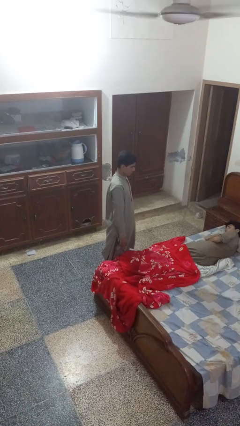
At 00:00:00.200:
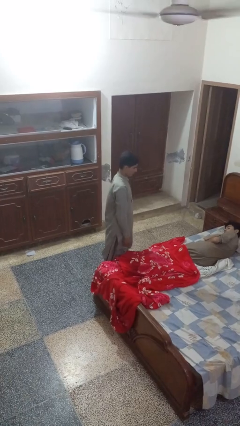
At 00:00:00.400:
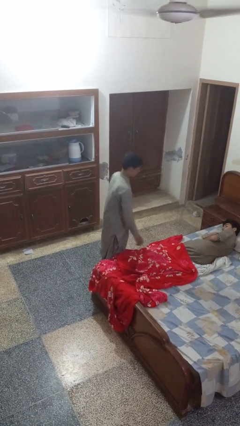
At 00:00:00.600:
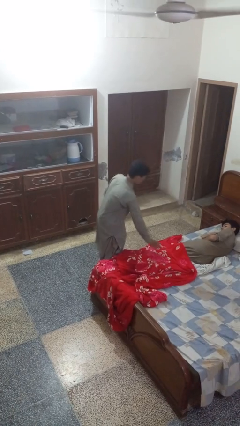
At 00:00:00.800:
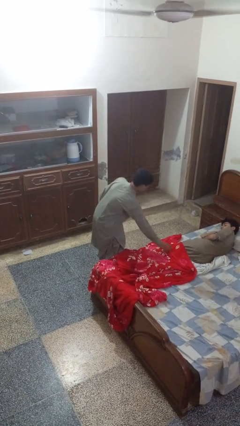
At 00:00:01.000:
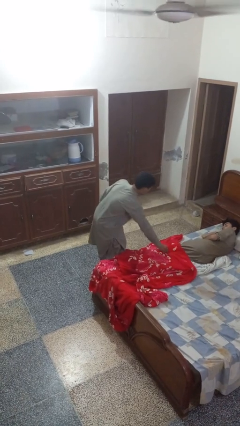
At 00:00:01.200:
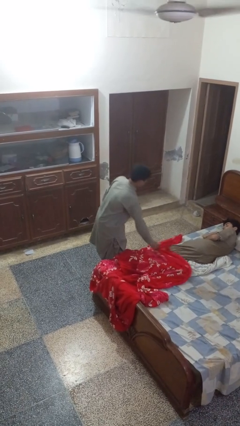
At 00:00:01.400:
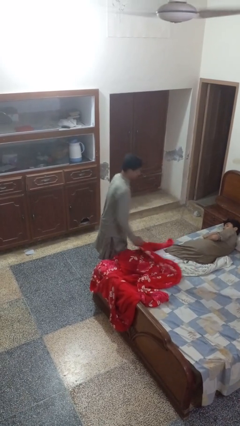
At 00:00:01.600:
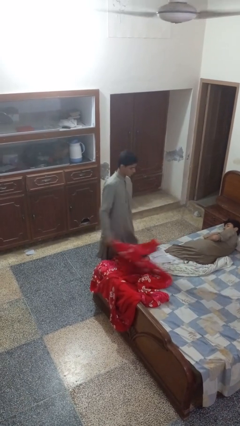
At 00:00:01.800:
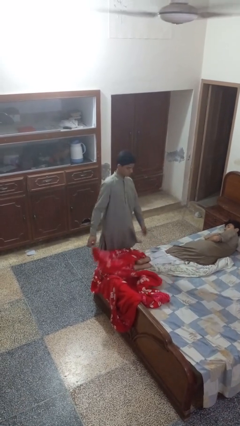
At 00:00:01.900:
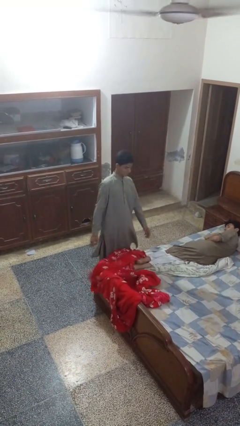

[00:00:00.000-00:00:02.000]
person uncovers friend with blanket

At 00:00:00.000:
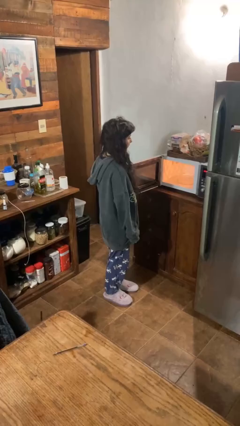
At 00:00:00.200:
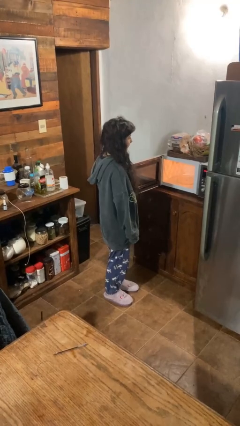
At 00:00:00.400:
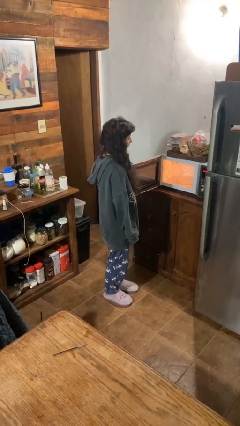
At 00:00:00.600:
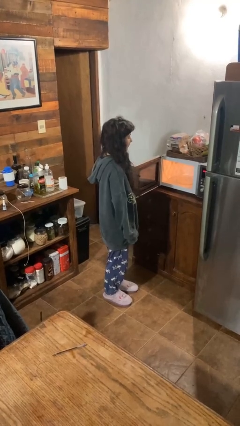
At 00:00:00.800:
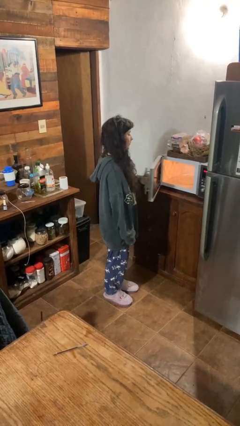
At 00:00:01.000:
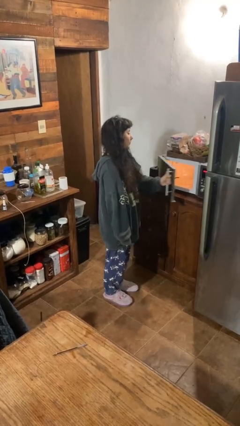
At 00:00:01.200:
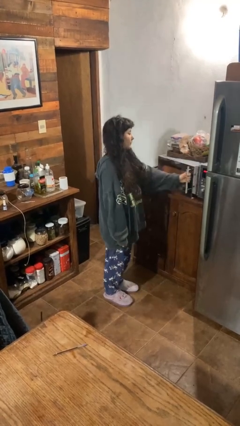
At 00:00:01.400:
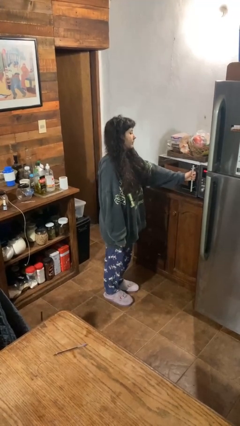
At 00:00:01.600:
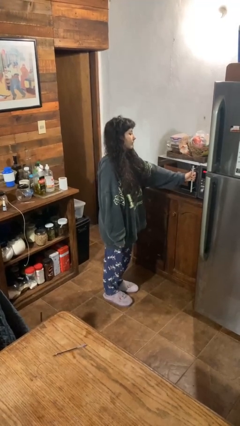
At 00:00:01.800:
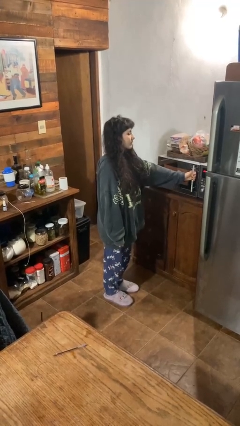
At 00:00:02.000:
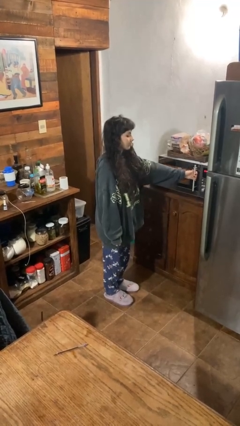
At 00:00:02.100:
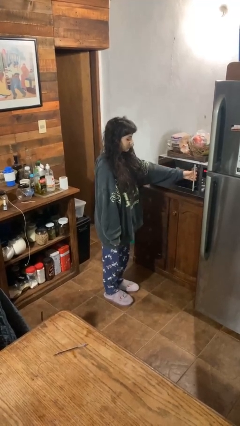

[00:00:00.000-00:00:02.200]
person closes microwave

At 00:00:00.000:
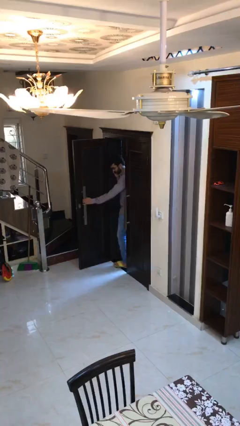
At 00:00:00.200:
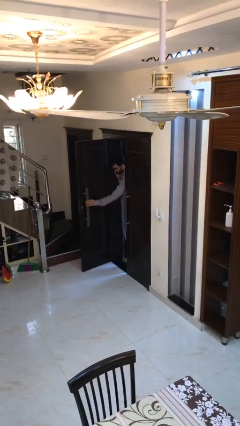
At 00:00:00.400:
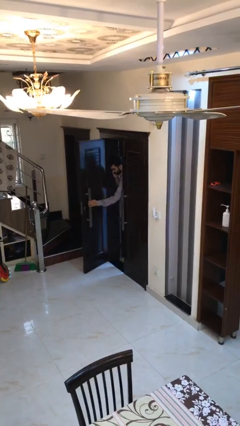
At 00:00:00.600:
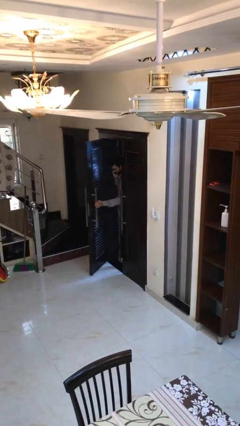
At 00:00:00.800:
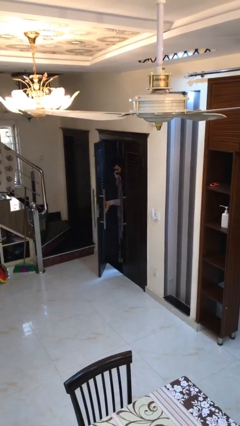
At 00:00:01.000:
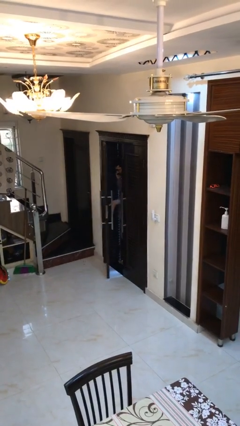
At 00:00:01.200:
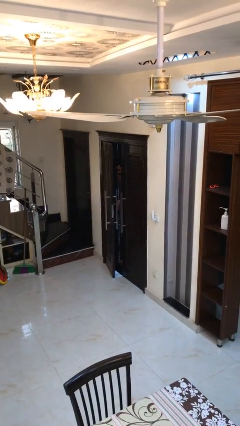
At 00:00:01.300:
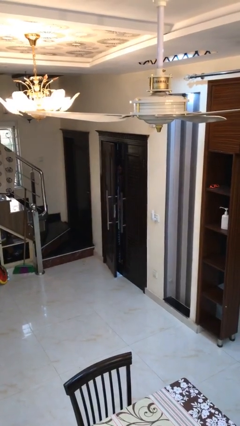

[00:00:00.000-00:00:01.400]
person closes facility door

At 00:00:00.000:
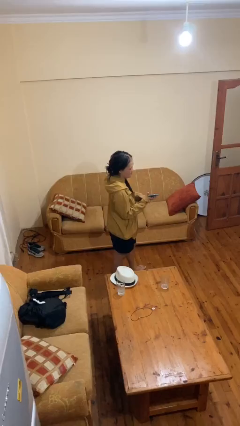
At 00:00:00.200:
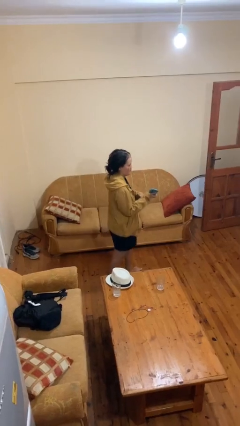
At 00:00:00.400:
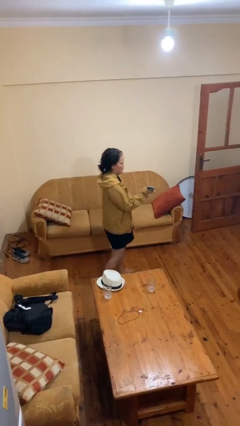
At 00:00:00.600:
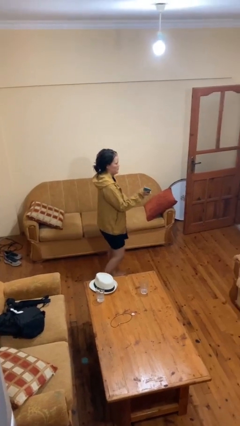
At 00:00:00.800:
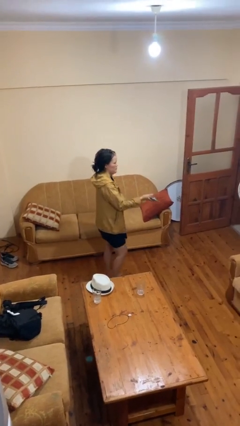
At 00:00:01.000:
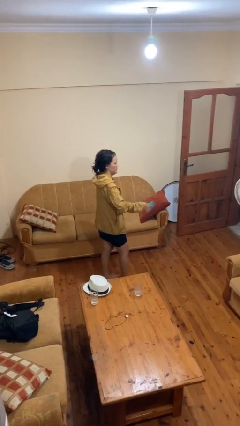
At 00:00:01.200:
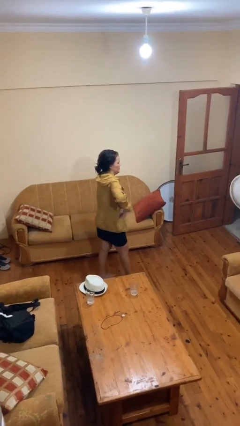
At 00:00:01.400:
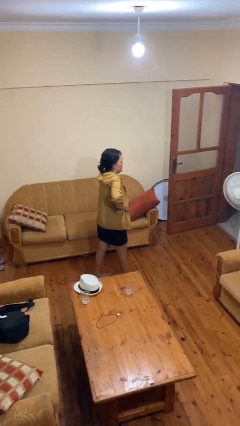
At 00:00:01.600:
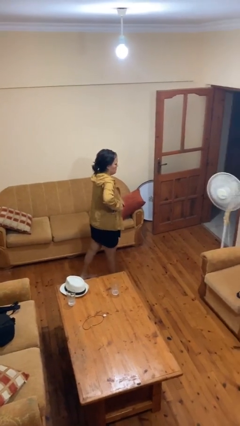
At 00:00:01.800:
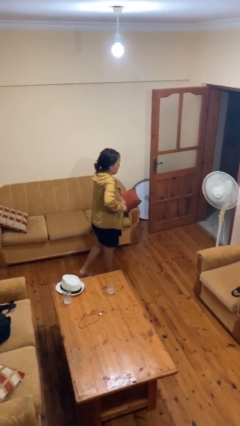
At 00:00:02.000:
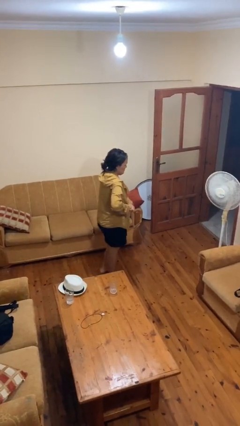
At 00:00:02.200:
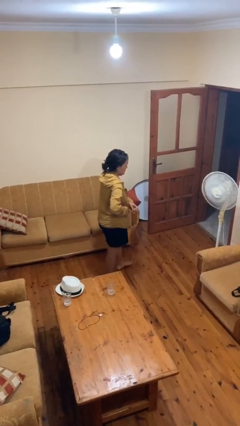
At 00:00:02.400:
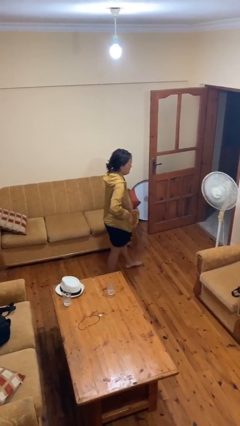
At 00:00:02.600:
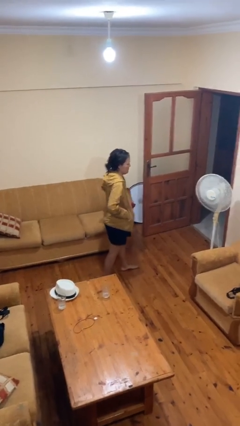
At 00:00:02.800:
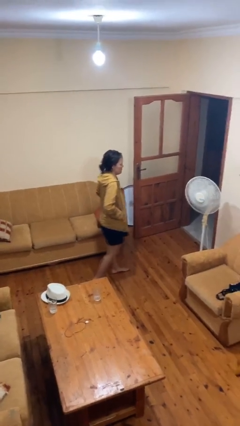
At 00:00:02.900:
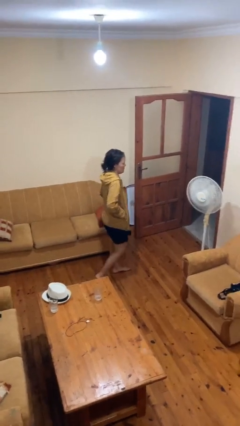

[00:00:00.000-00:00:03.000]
person puts phone into pocket

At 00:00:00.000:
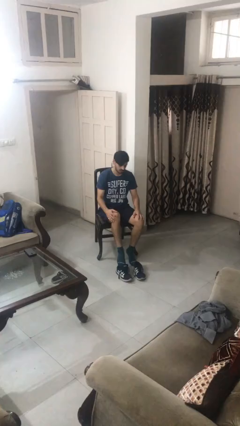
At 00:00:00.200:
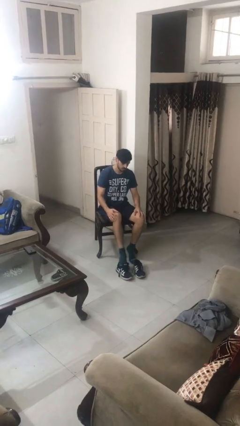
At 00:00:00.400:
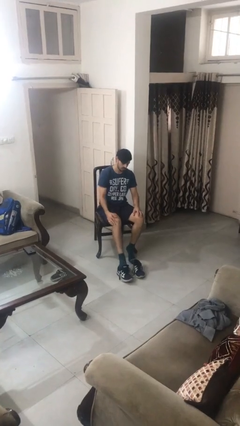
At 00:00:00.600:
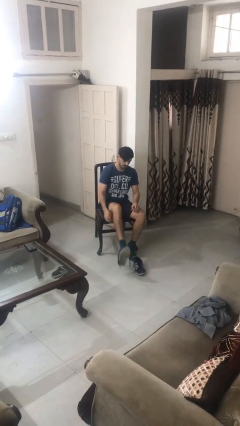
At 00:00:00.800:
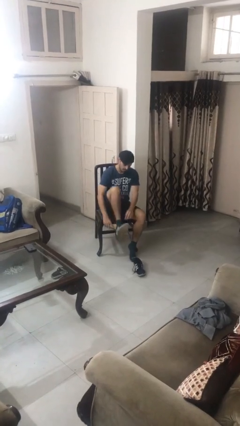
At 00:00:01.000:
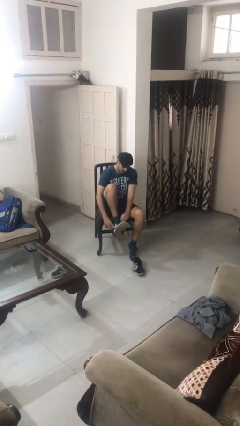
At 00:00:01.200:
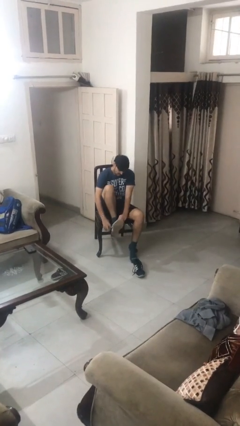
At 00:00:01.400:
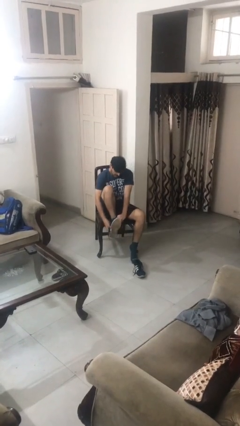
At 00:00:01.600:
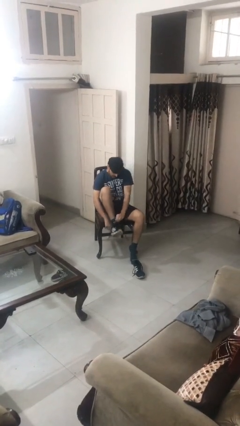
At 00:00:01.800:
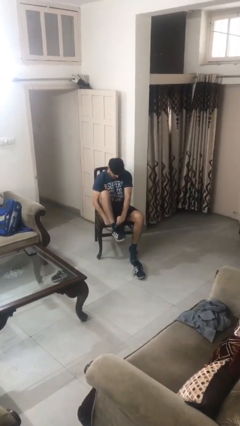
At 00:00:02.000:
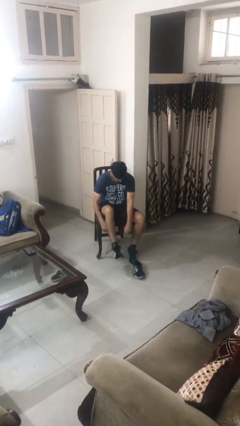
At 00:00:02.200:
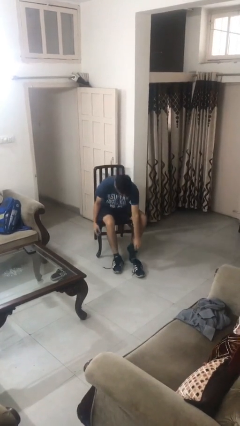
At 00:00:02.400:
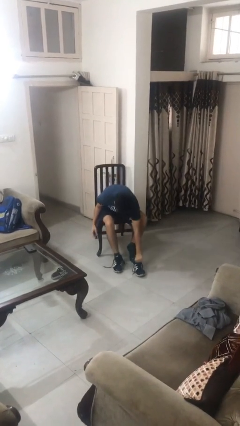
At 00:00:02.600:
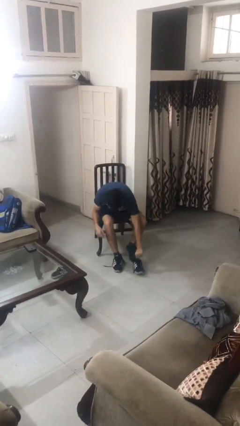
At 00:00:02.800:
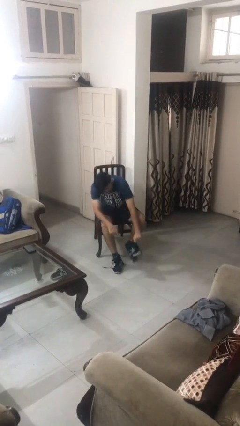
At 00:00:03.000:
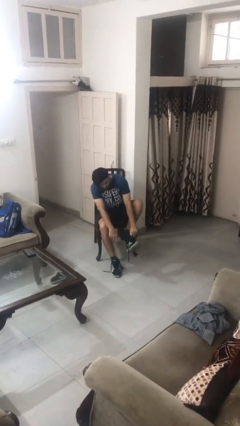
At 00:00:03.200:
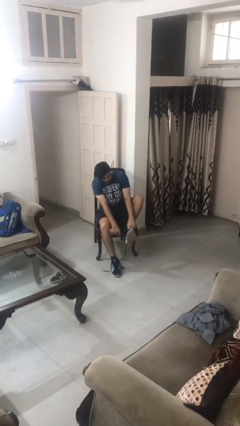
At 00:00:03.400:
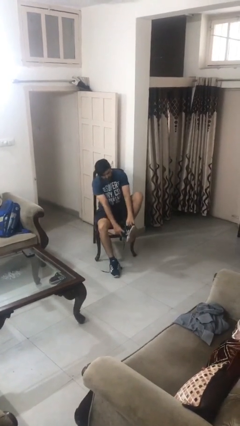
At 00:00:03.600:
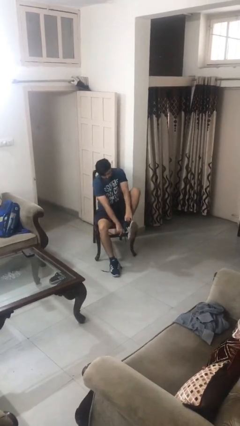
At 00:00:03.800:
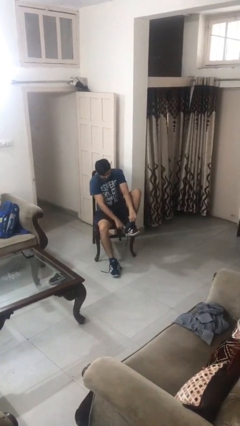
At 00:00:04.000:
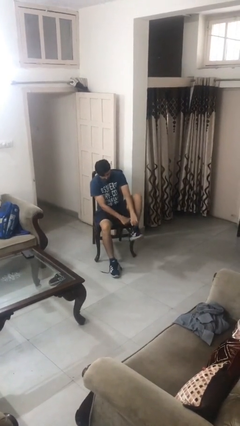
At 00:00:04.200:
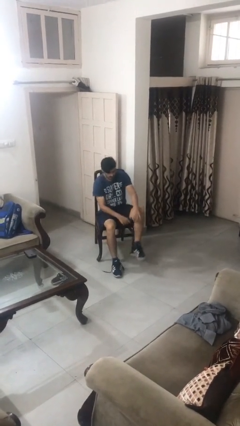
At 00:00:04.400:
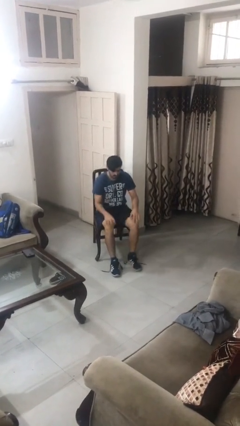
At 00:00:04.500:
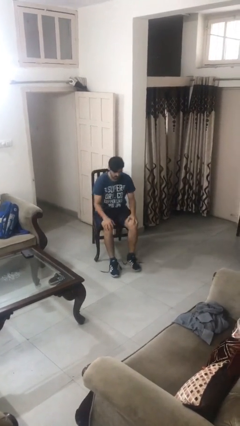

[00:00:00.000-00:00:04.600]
person puts on shoes

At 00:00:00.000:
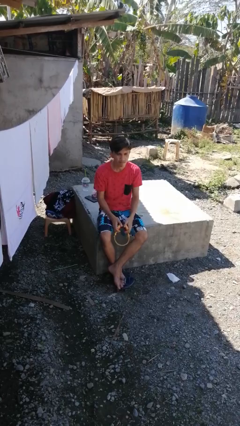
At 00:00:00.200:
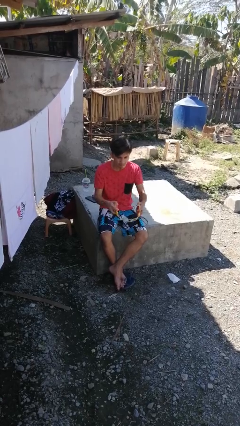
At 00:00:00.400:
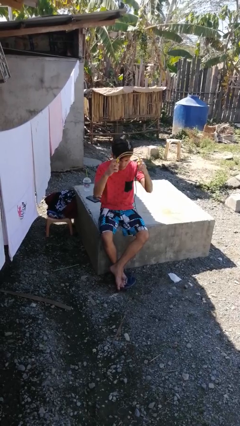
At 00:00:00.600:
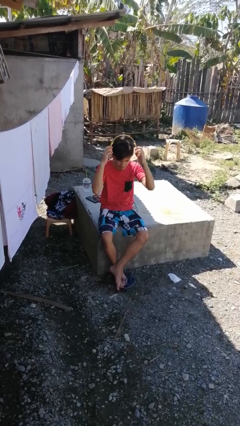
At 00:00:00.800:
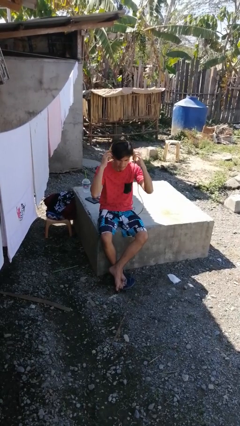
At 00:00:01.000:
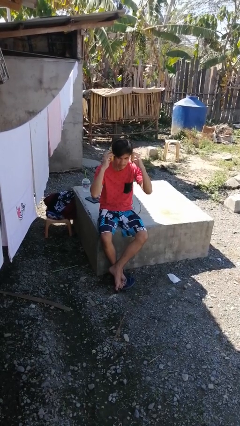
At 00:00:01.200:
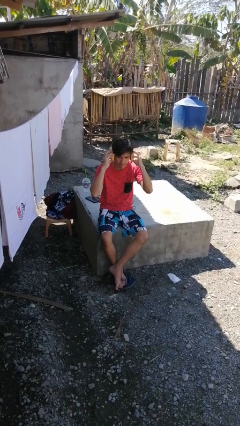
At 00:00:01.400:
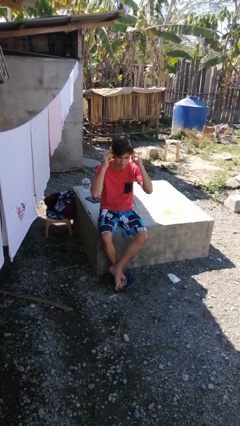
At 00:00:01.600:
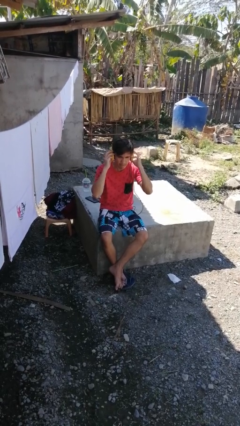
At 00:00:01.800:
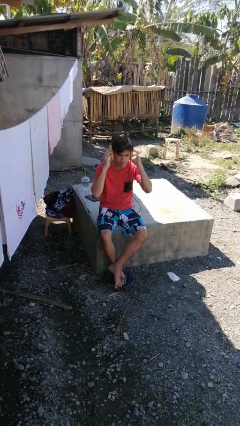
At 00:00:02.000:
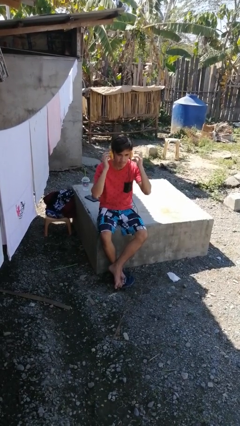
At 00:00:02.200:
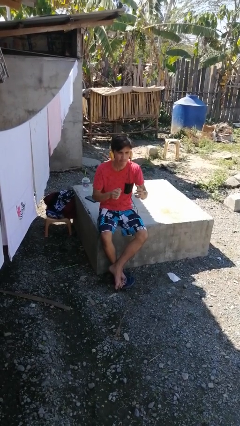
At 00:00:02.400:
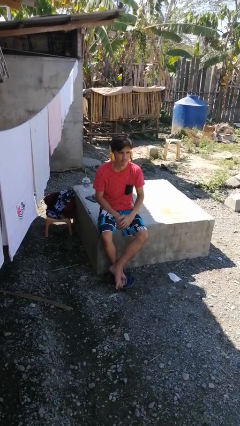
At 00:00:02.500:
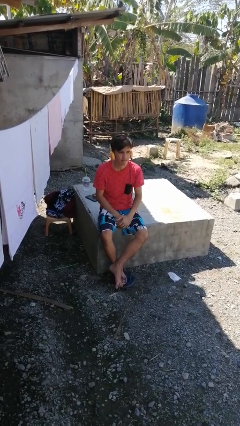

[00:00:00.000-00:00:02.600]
person puts on headphones

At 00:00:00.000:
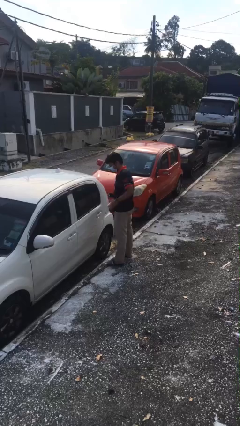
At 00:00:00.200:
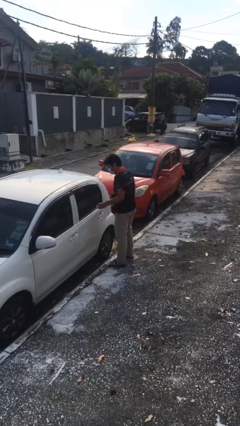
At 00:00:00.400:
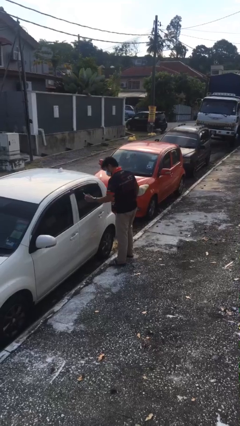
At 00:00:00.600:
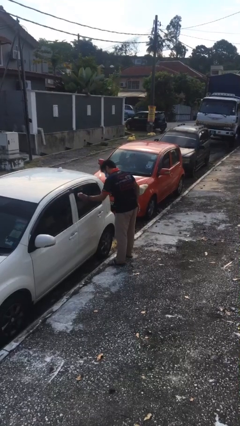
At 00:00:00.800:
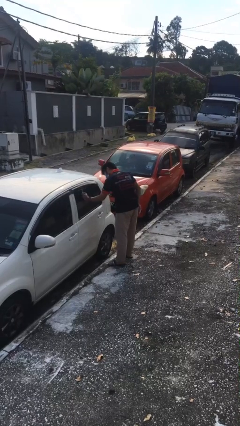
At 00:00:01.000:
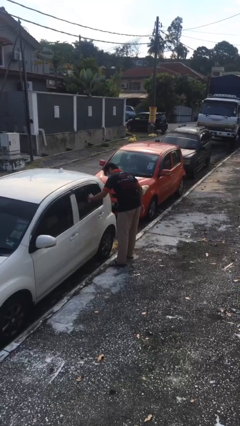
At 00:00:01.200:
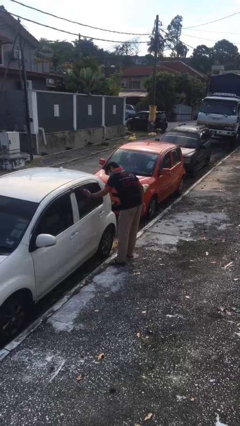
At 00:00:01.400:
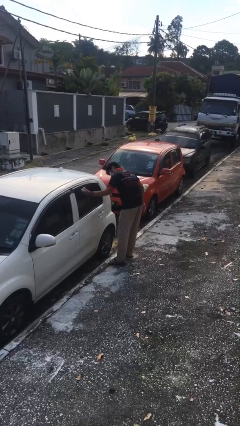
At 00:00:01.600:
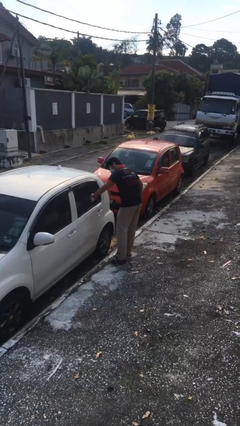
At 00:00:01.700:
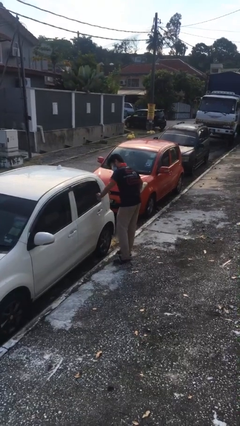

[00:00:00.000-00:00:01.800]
person polishes car with rag
